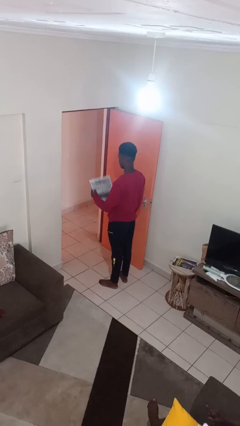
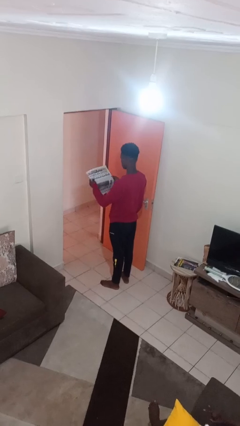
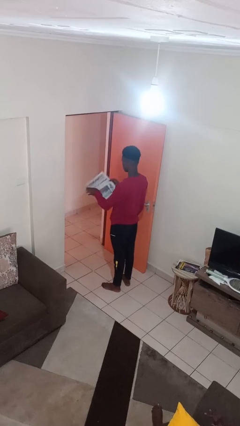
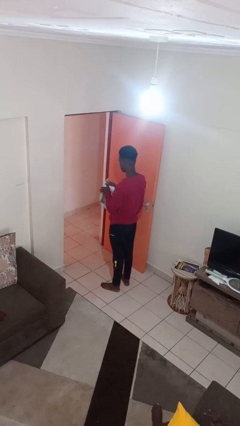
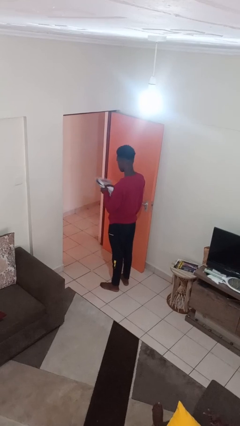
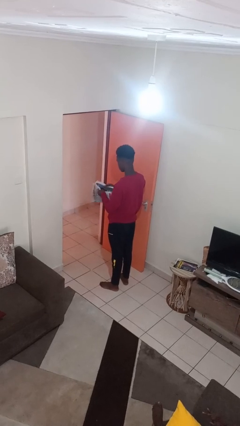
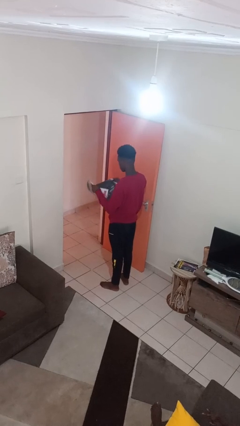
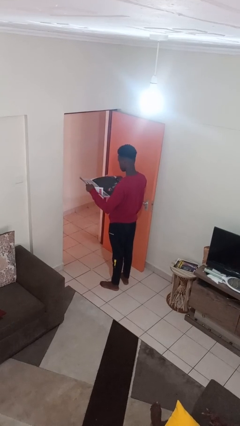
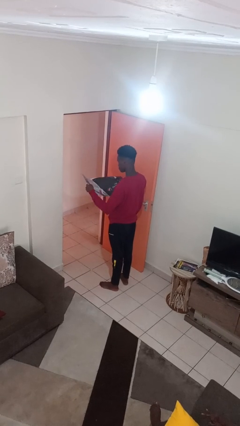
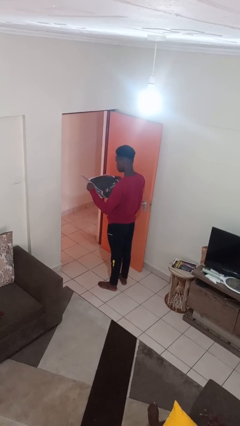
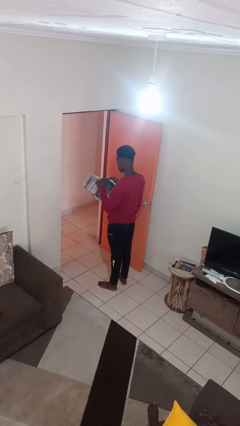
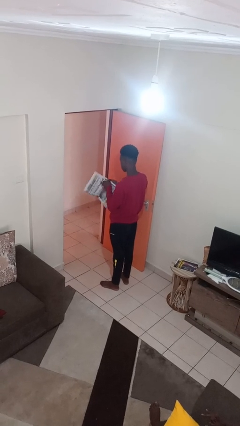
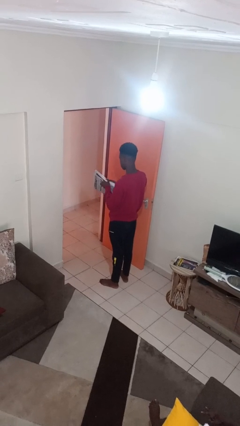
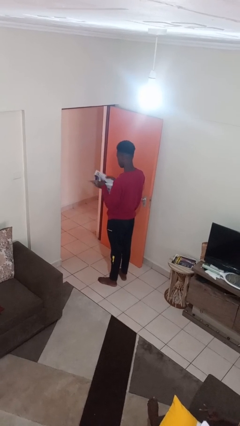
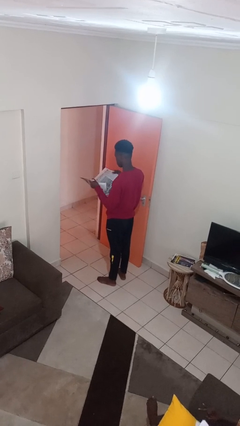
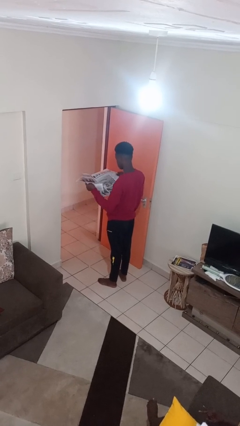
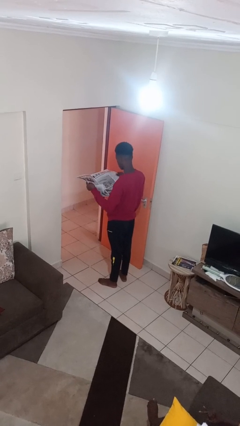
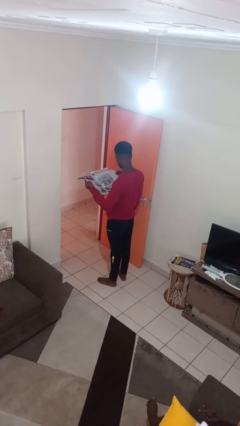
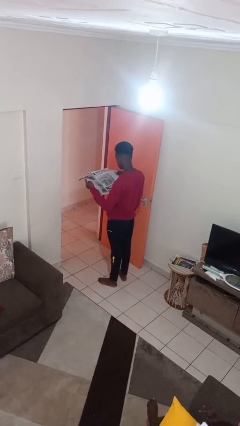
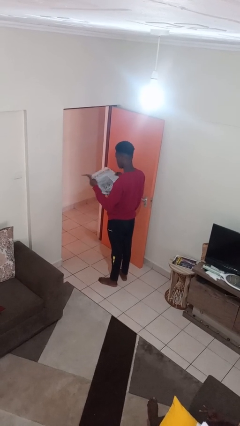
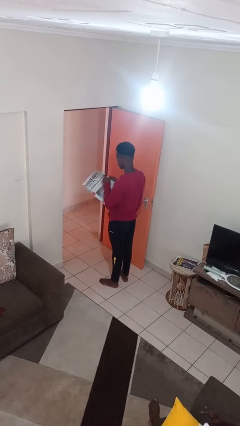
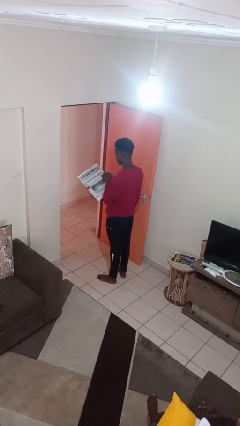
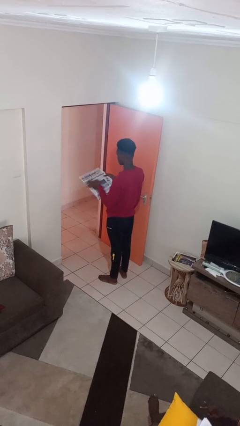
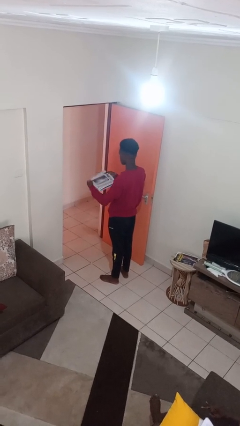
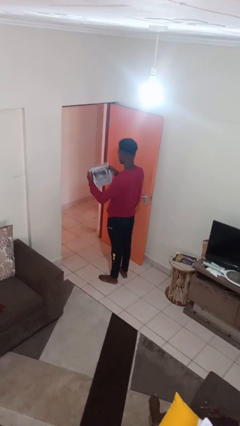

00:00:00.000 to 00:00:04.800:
person reads newspaper

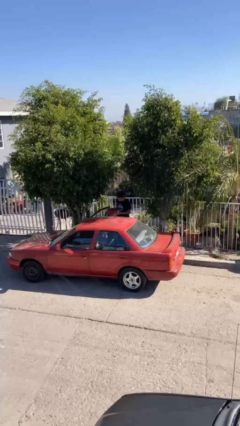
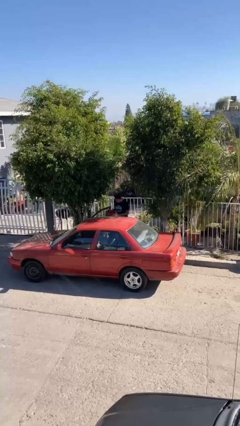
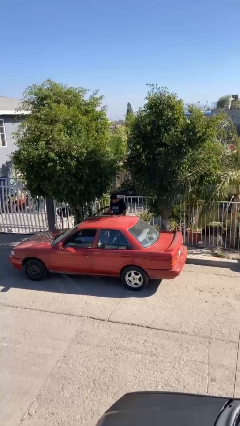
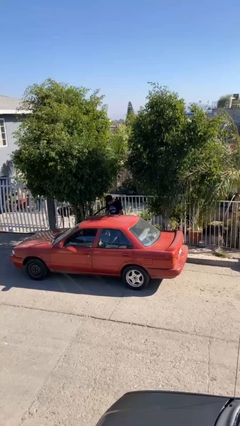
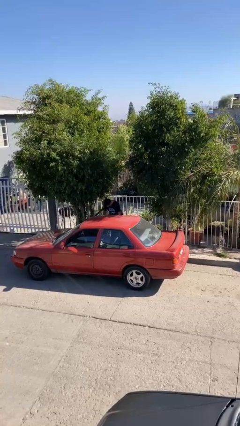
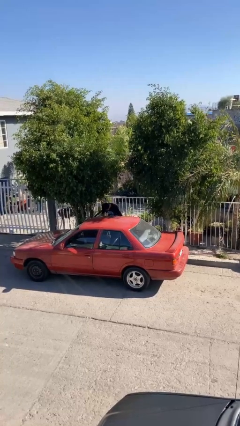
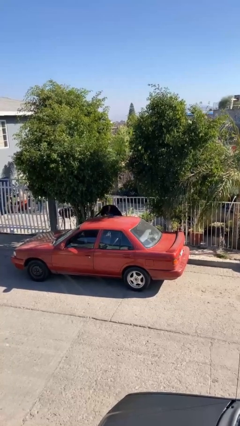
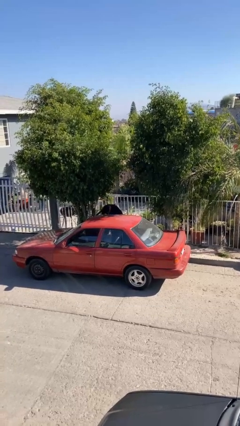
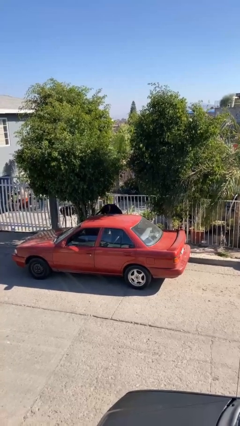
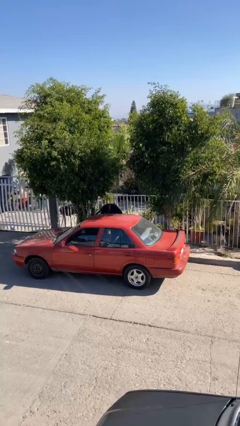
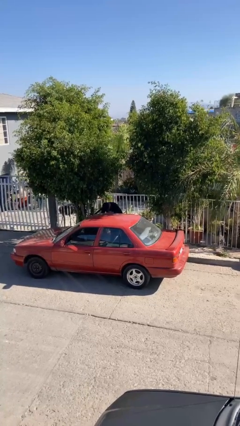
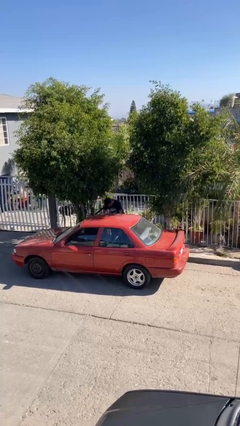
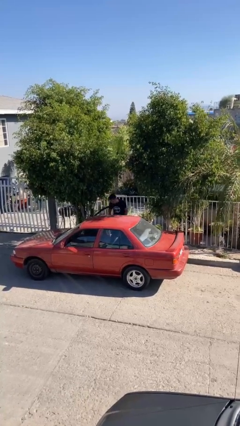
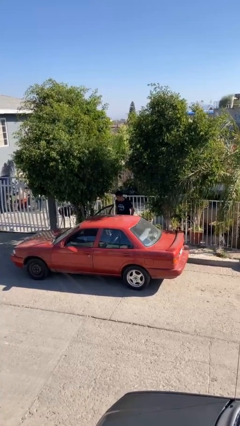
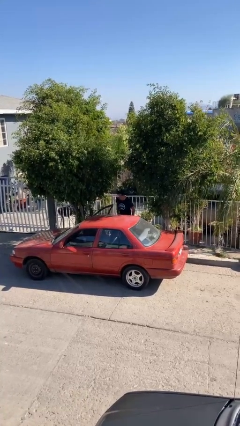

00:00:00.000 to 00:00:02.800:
person loads car

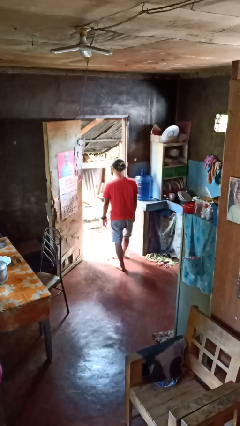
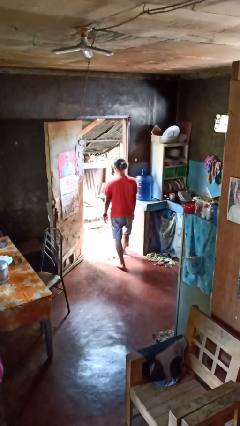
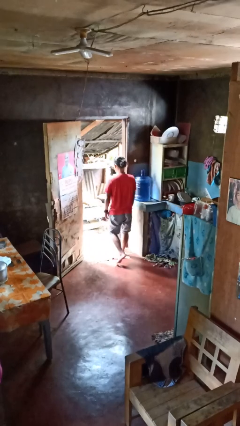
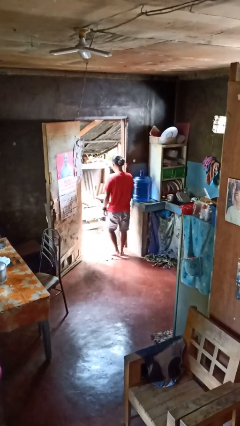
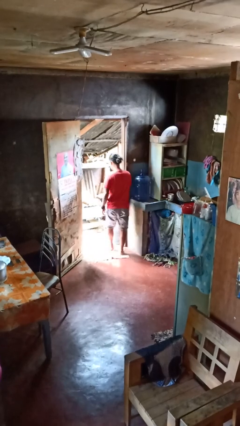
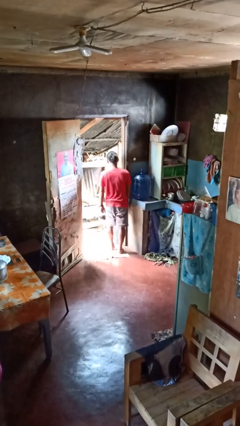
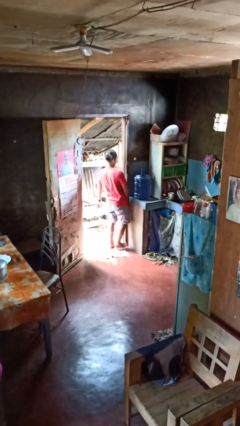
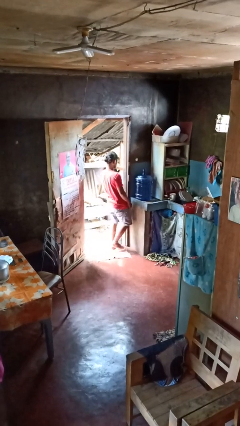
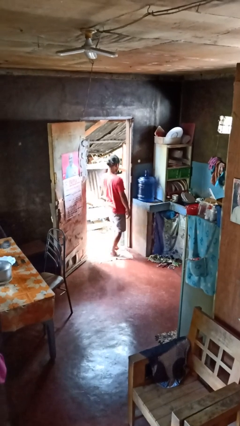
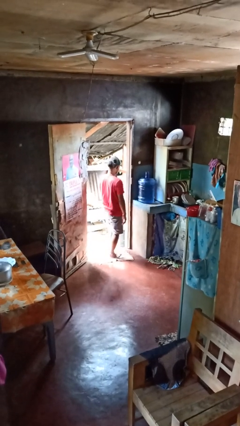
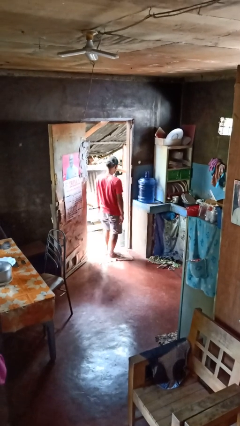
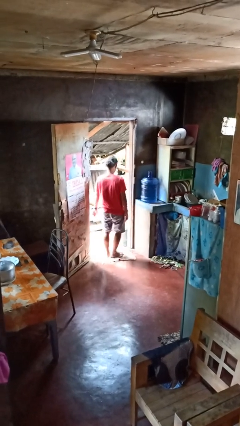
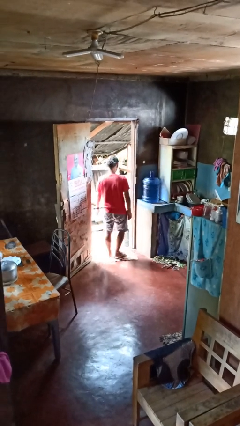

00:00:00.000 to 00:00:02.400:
person bumps into wall

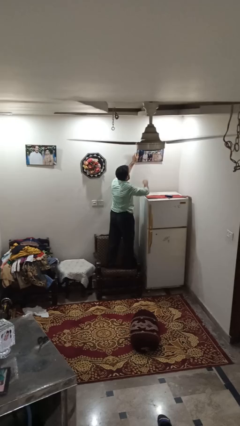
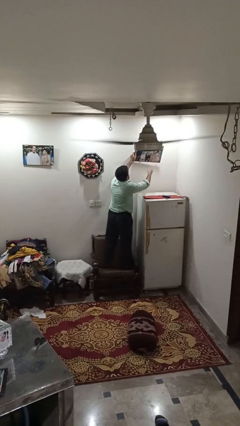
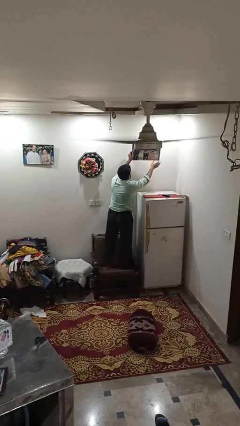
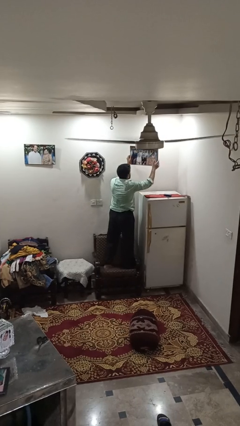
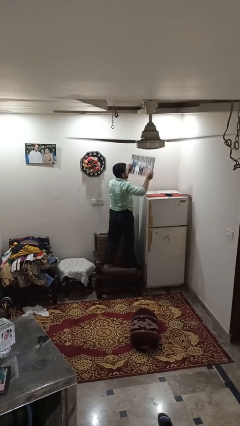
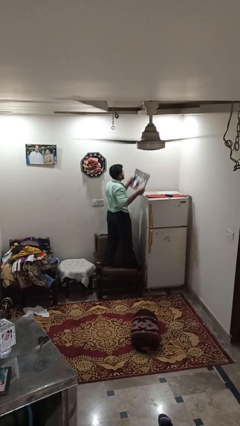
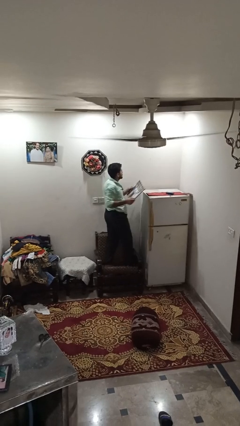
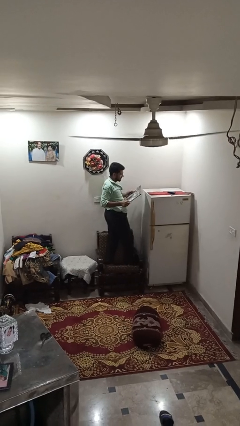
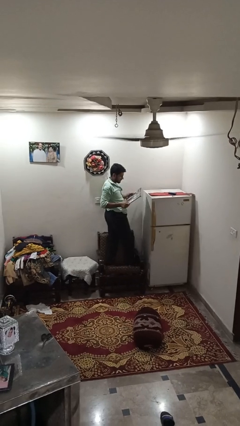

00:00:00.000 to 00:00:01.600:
person takes down picture frame

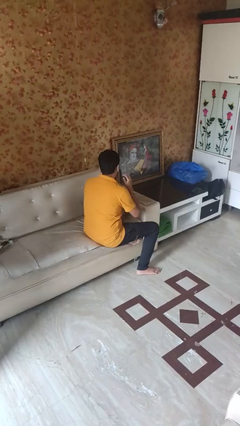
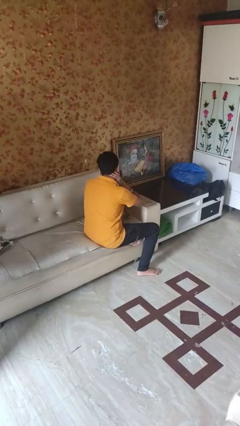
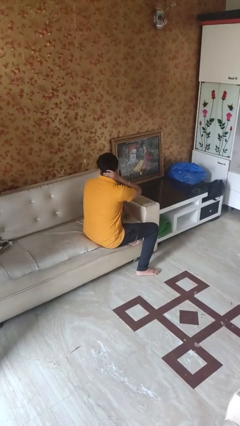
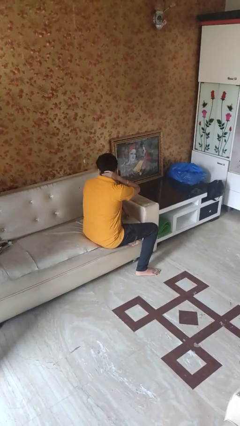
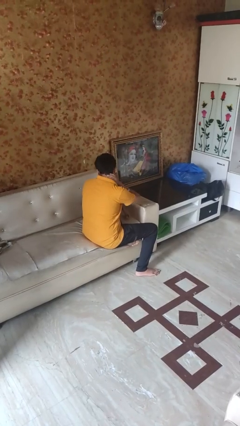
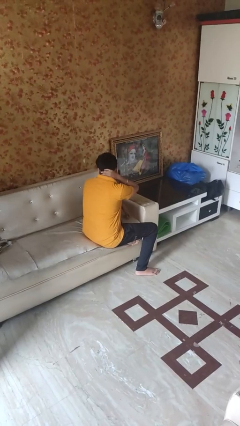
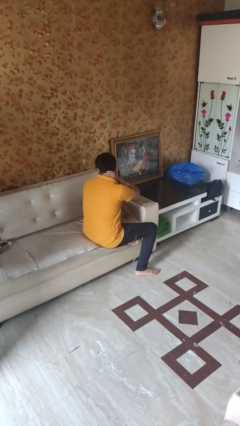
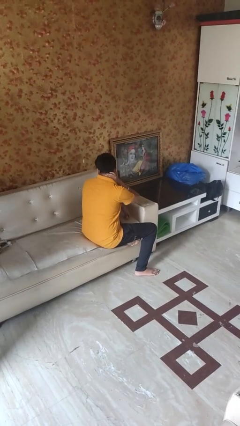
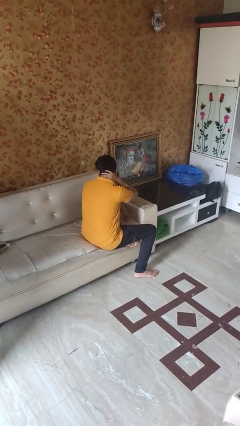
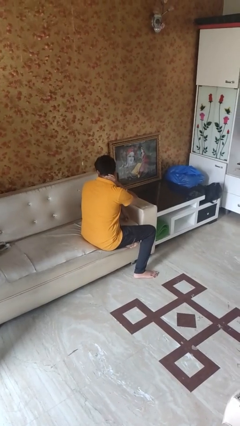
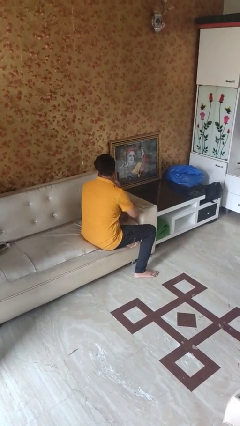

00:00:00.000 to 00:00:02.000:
person rubs neck

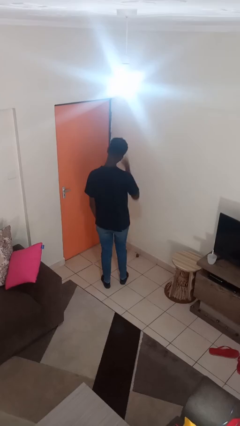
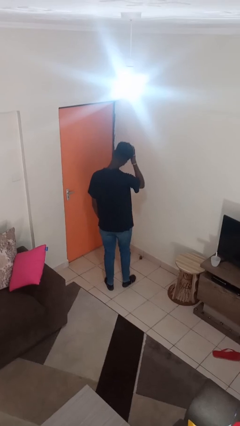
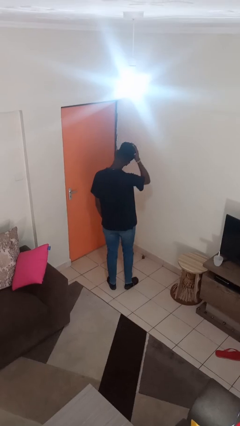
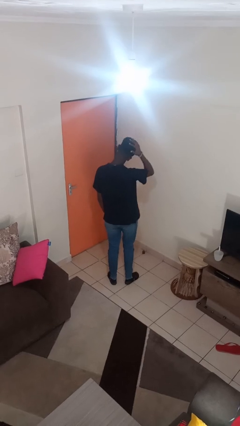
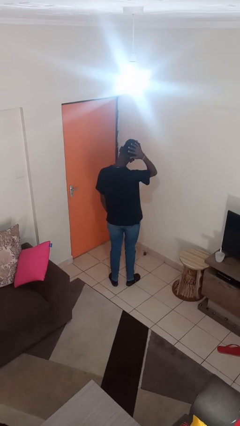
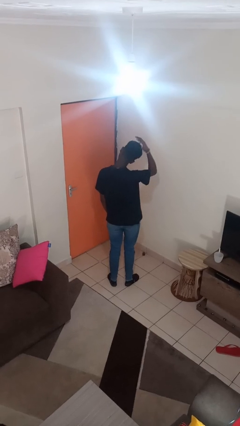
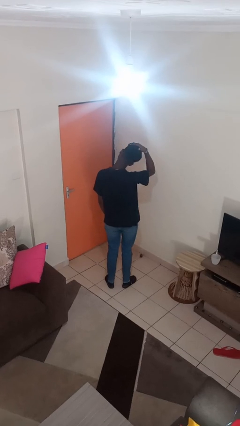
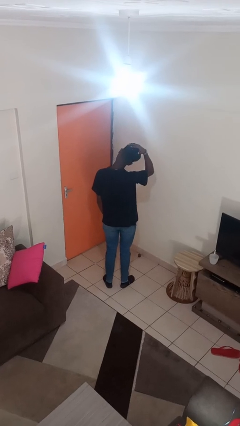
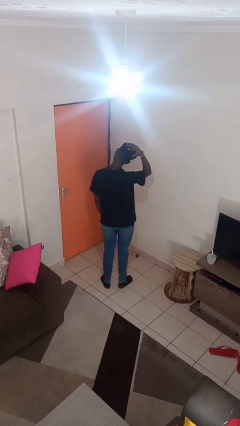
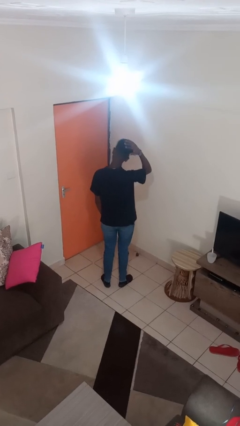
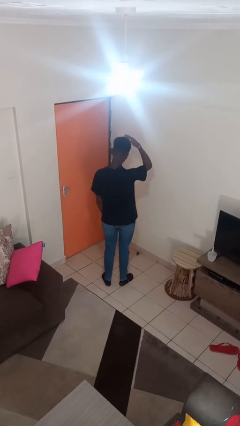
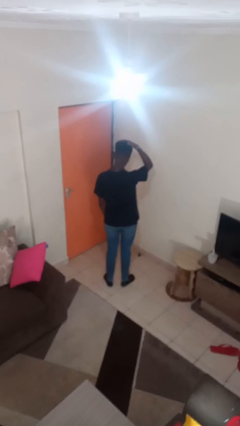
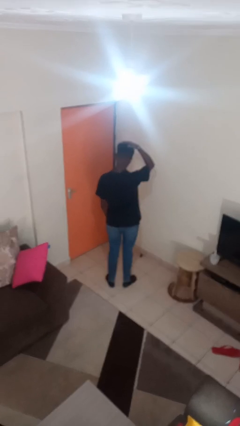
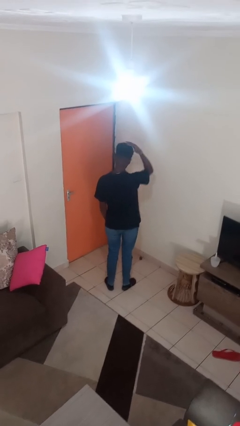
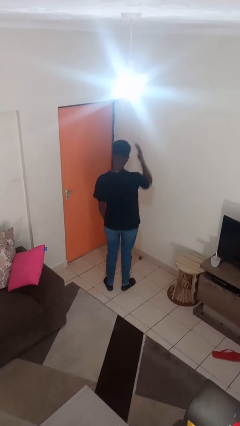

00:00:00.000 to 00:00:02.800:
person strokes hair

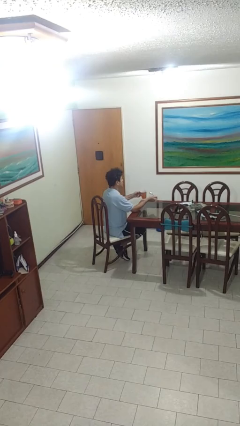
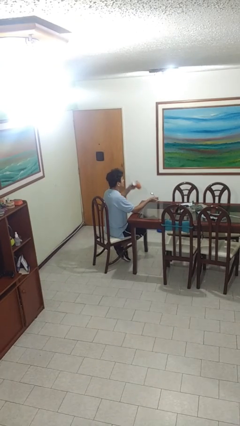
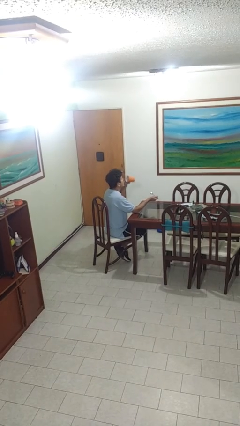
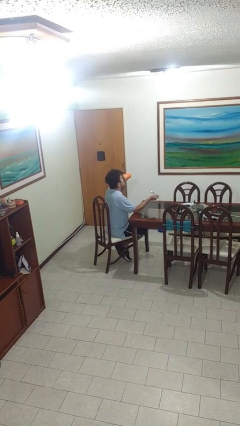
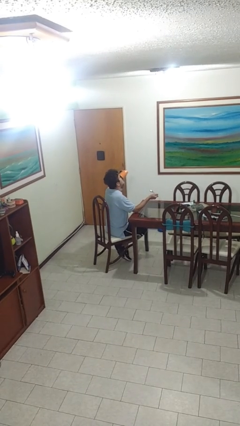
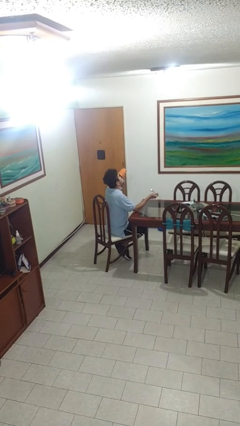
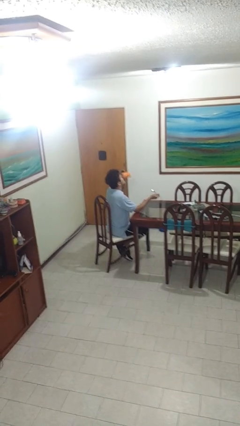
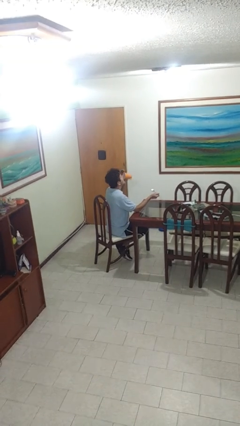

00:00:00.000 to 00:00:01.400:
person drinks from mug
